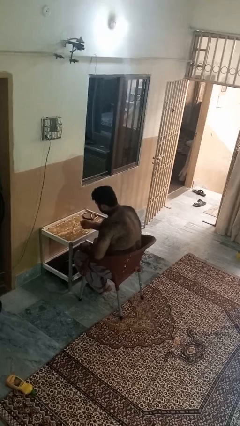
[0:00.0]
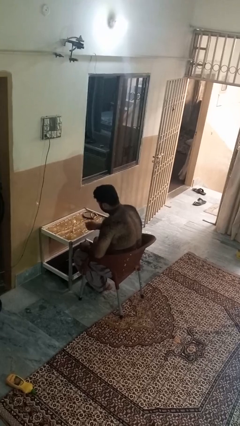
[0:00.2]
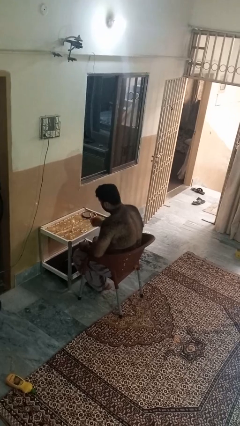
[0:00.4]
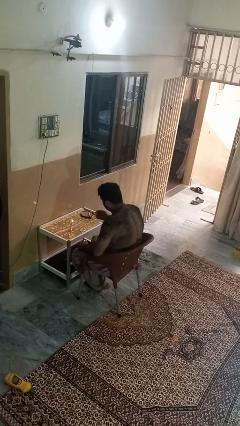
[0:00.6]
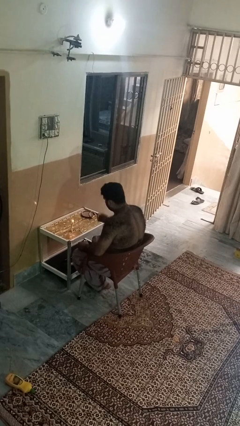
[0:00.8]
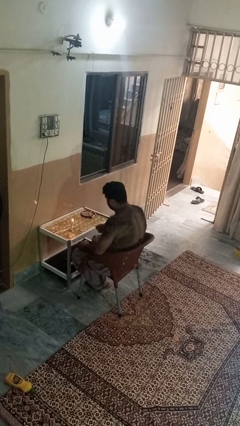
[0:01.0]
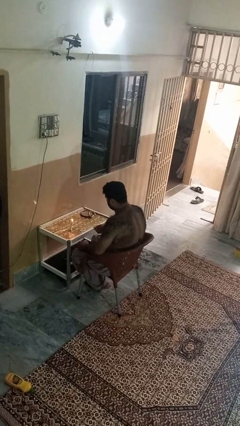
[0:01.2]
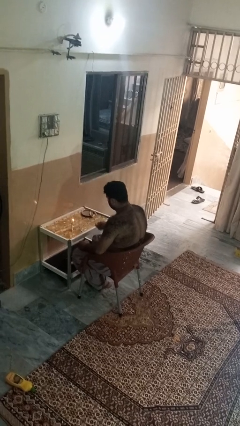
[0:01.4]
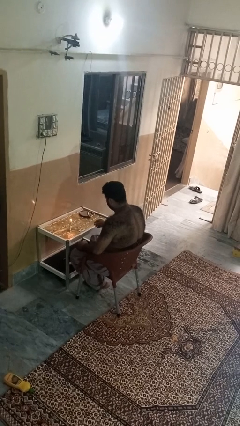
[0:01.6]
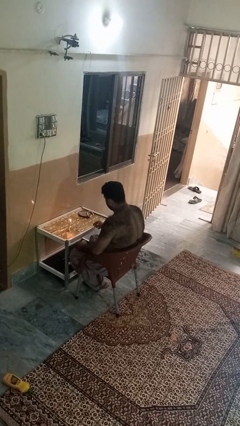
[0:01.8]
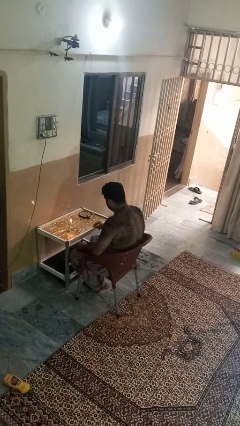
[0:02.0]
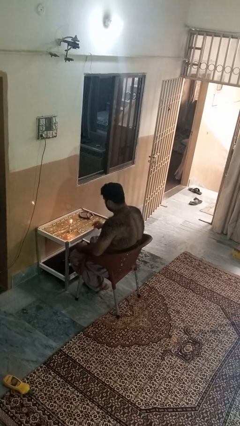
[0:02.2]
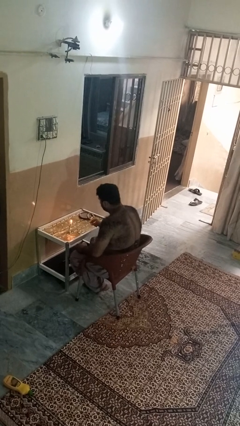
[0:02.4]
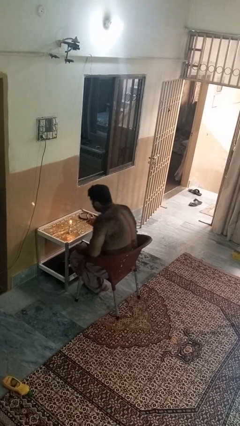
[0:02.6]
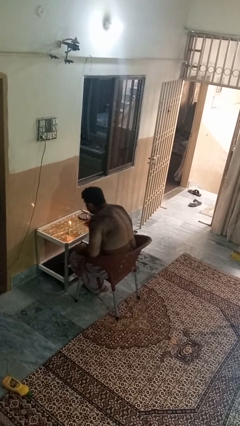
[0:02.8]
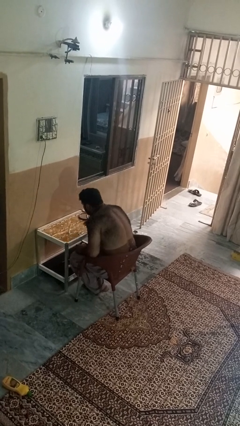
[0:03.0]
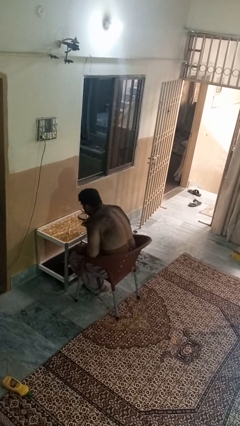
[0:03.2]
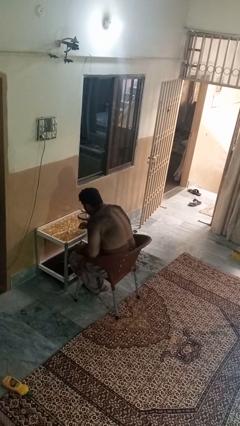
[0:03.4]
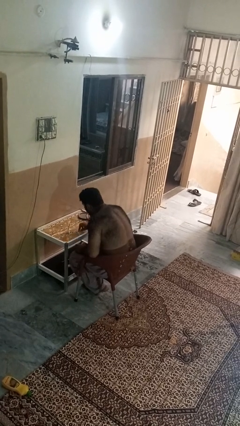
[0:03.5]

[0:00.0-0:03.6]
person nods head

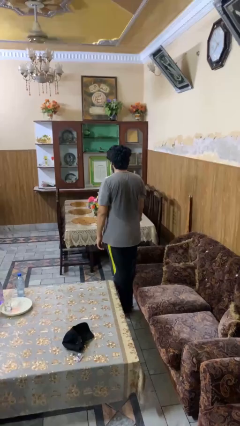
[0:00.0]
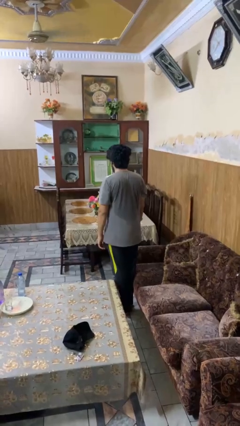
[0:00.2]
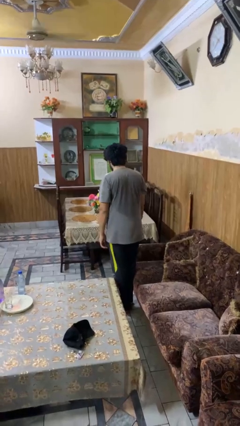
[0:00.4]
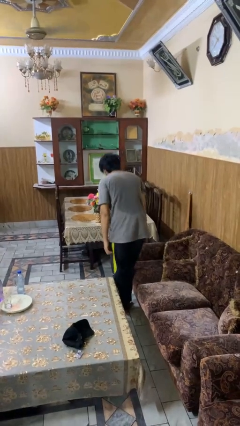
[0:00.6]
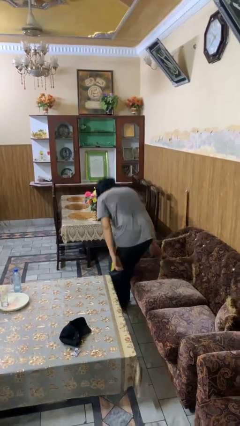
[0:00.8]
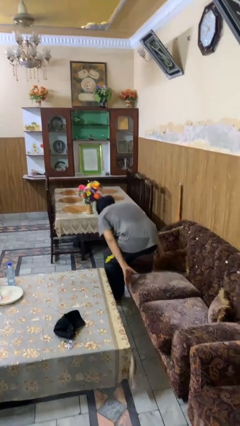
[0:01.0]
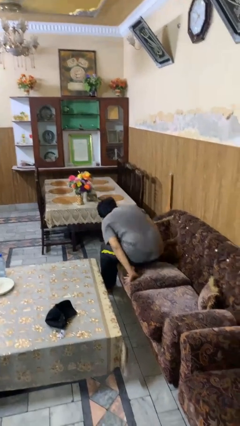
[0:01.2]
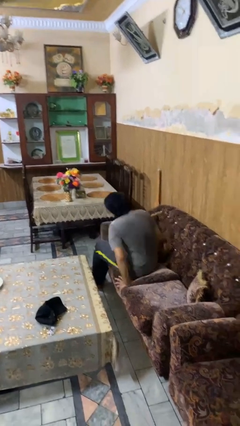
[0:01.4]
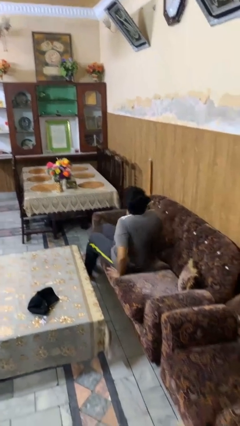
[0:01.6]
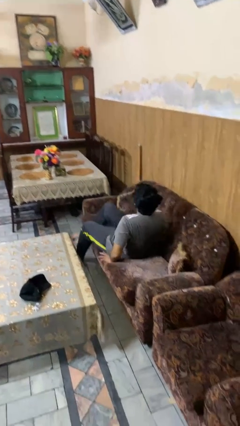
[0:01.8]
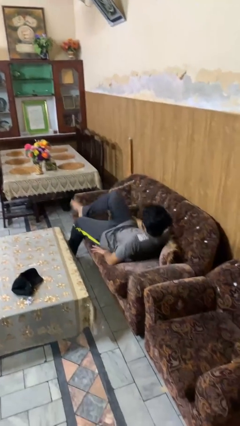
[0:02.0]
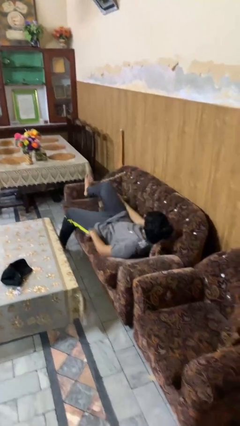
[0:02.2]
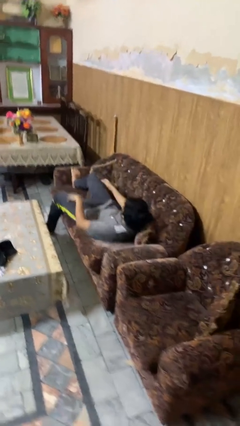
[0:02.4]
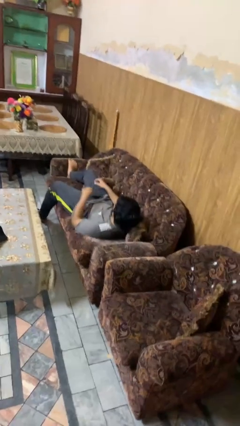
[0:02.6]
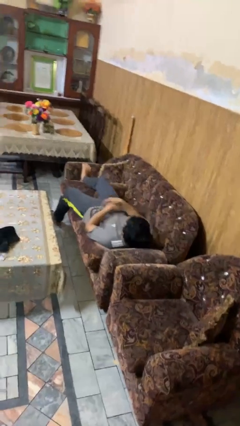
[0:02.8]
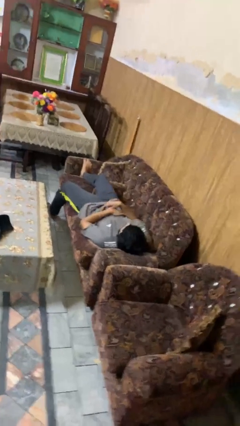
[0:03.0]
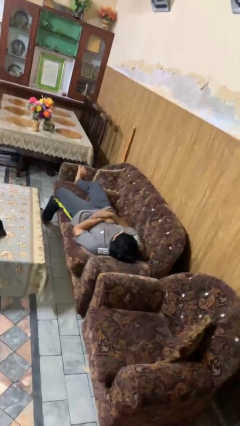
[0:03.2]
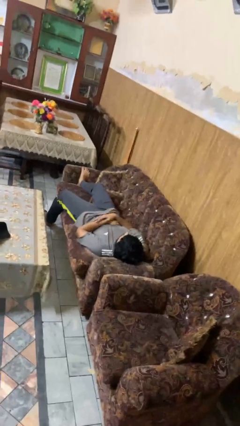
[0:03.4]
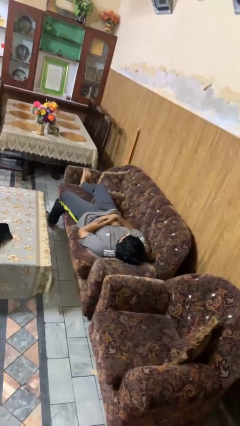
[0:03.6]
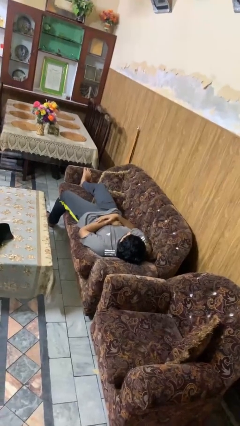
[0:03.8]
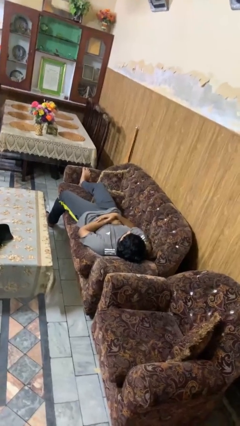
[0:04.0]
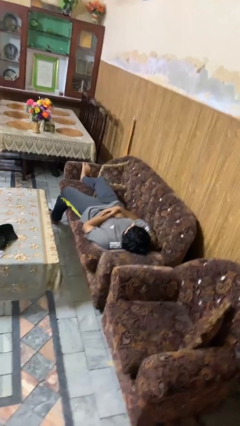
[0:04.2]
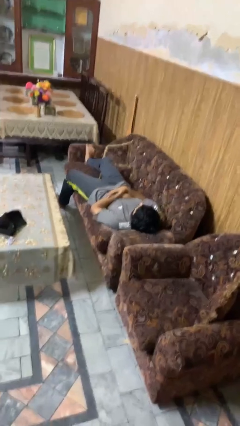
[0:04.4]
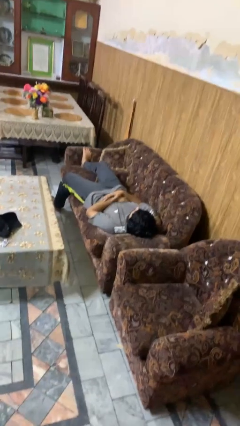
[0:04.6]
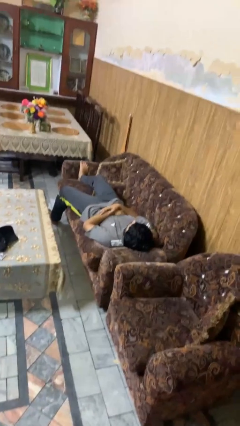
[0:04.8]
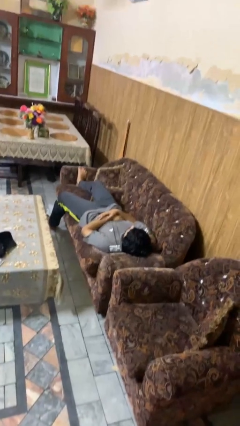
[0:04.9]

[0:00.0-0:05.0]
person lies down on couch

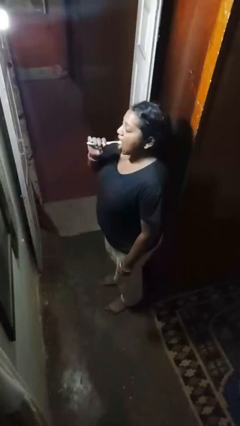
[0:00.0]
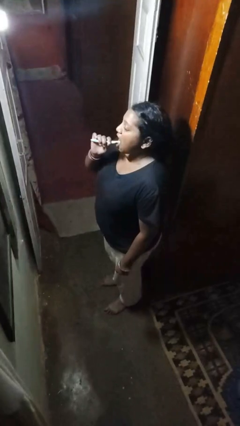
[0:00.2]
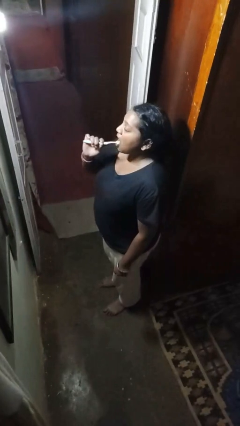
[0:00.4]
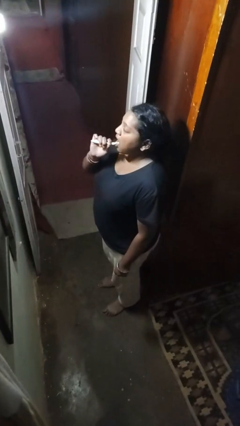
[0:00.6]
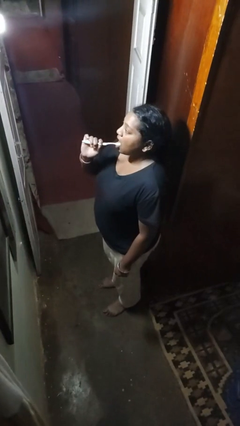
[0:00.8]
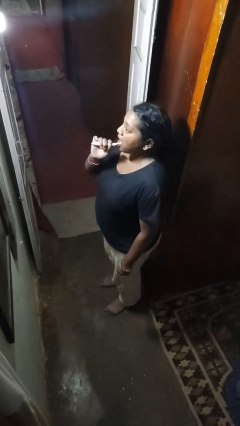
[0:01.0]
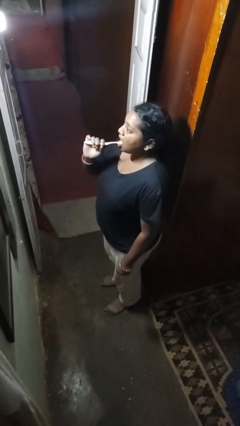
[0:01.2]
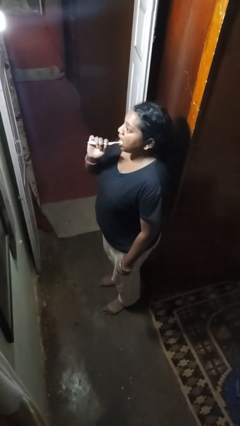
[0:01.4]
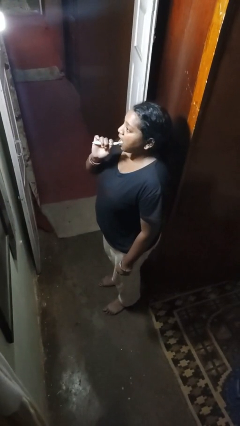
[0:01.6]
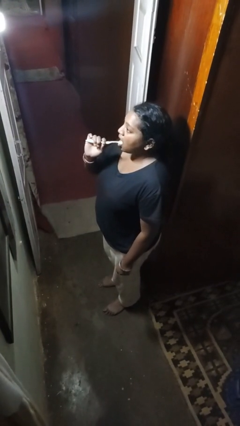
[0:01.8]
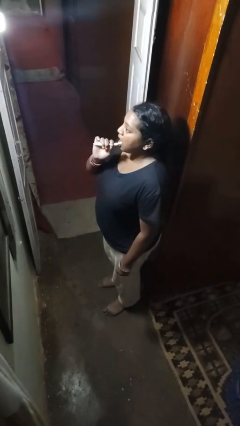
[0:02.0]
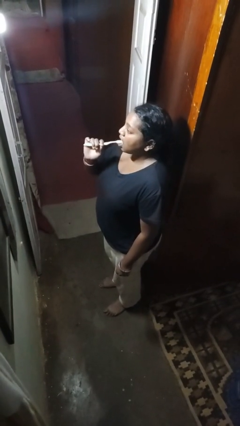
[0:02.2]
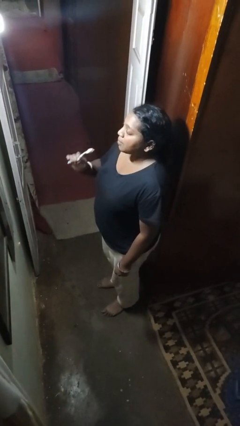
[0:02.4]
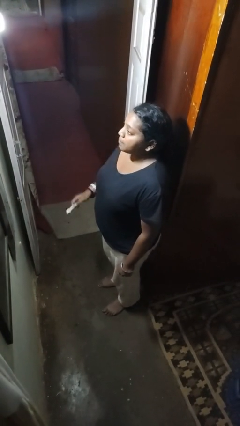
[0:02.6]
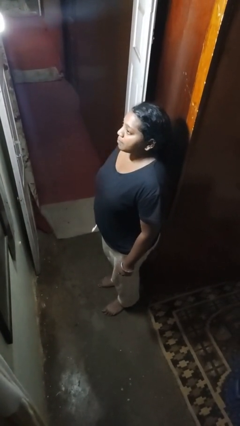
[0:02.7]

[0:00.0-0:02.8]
person brushes teeth

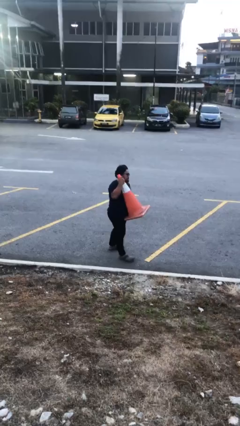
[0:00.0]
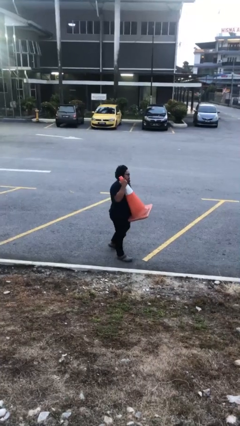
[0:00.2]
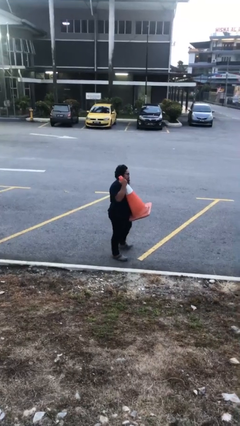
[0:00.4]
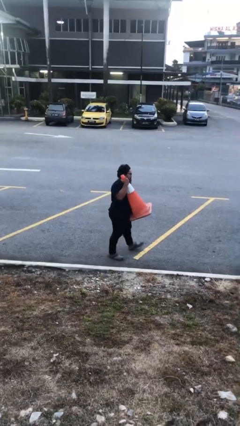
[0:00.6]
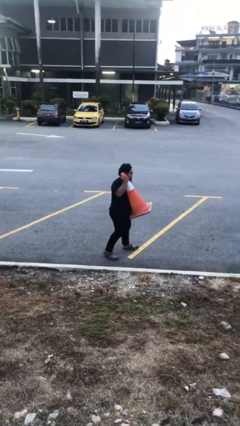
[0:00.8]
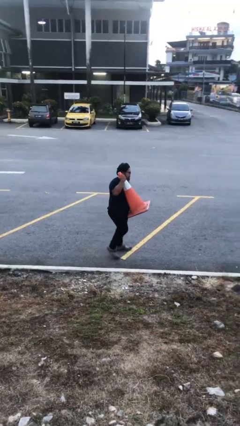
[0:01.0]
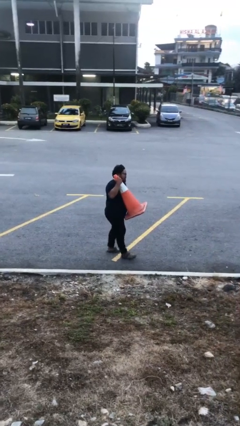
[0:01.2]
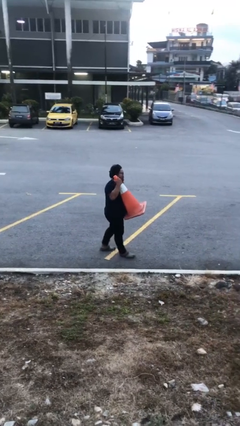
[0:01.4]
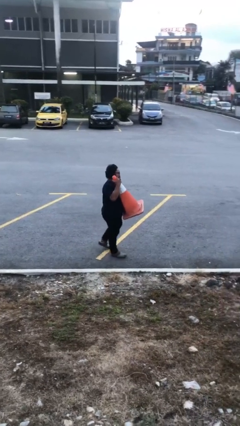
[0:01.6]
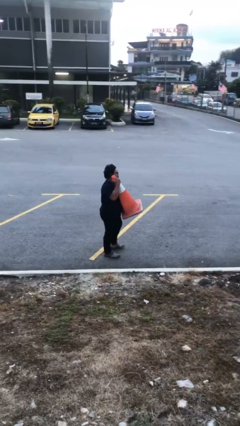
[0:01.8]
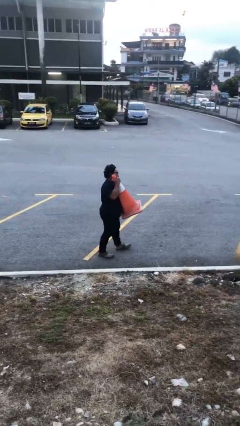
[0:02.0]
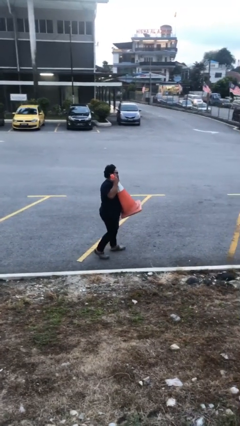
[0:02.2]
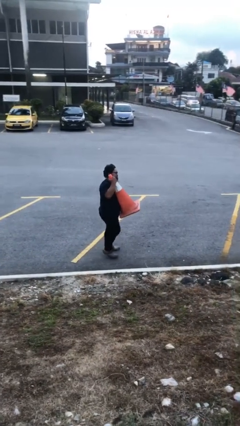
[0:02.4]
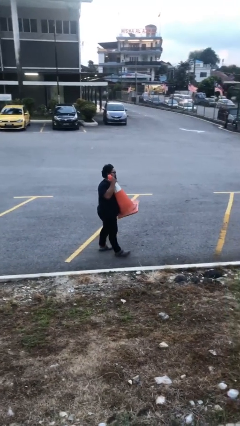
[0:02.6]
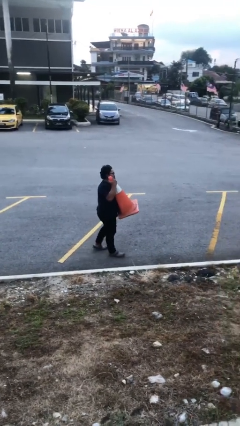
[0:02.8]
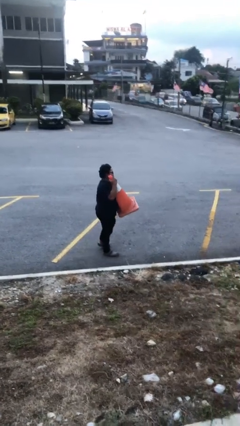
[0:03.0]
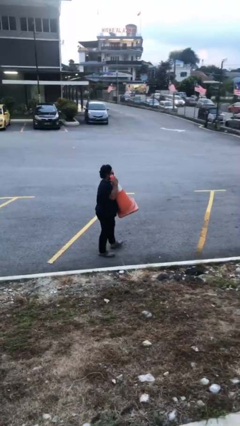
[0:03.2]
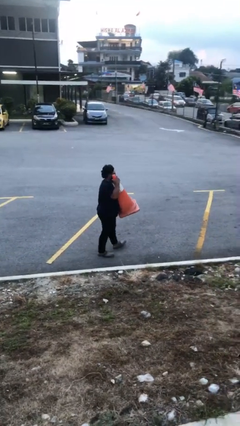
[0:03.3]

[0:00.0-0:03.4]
person carries heavy object

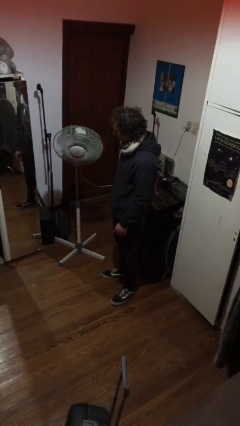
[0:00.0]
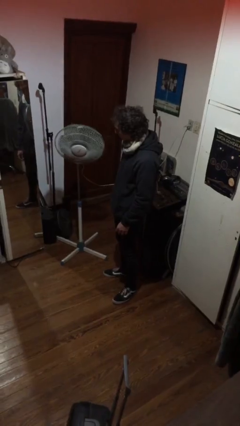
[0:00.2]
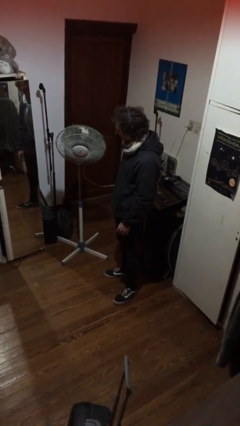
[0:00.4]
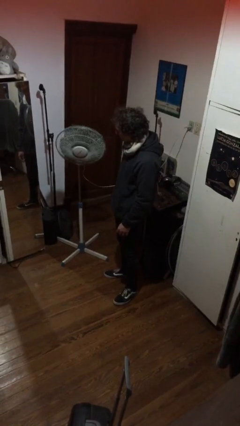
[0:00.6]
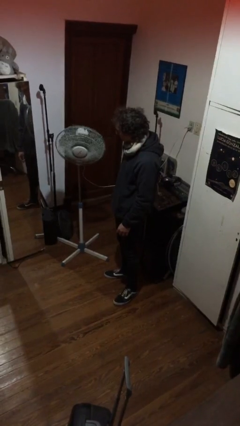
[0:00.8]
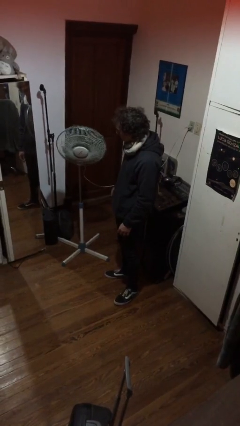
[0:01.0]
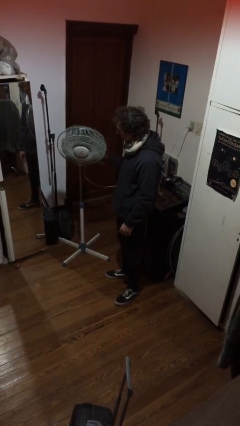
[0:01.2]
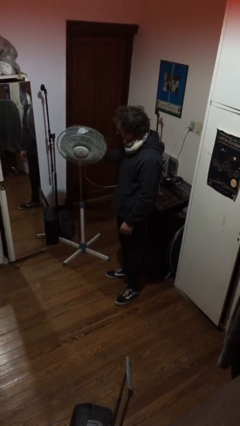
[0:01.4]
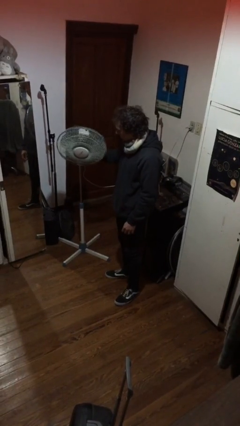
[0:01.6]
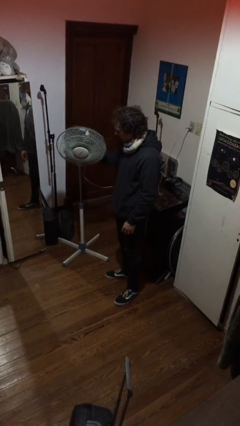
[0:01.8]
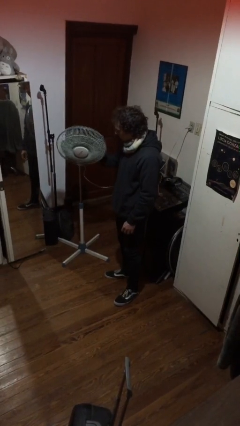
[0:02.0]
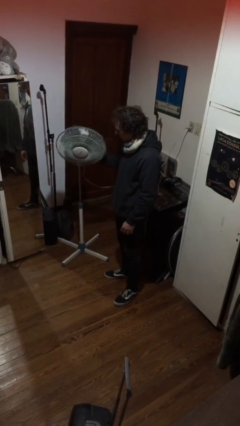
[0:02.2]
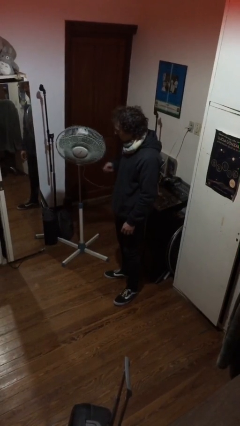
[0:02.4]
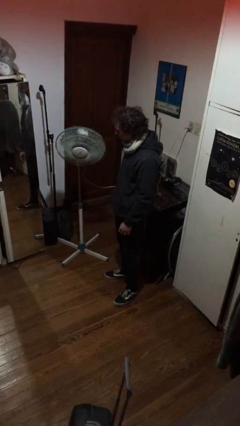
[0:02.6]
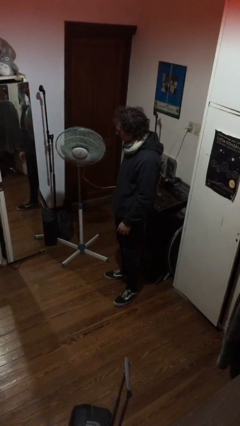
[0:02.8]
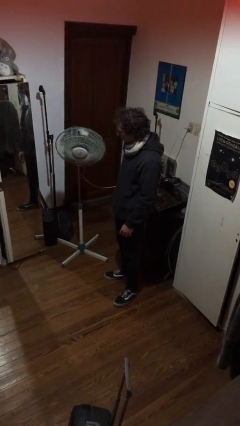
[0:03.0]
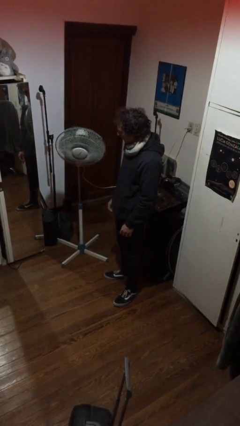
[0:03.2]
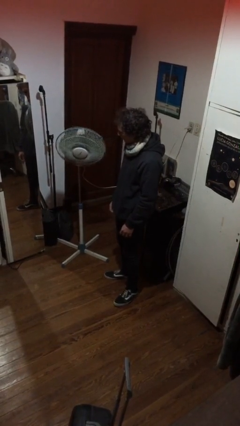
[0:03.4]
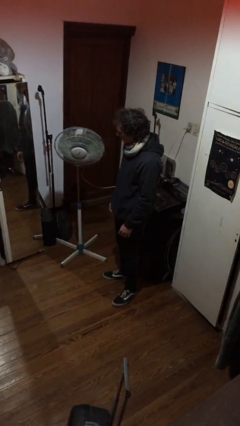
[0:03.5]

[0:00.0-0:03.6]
person turns on fan
